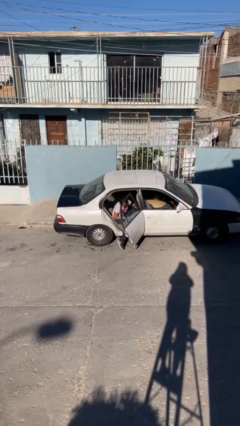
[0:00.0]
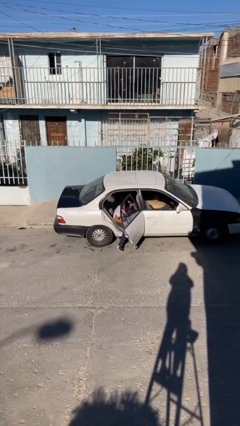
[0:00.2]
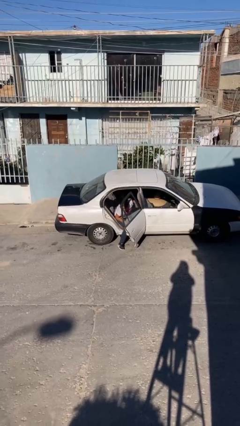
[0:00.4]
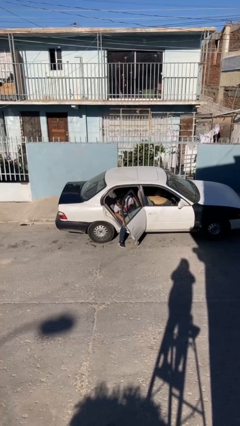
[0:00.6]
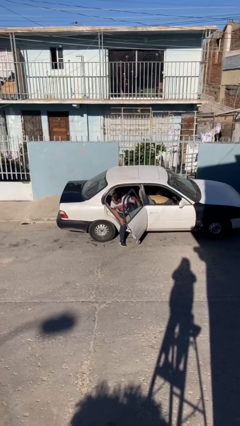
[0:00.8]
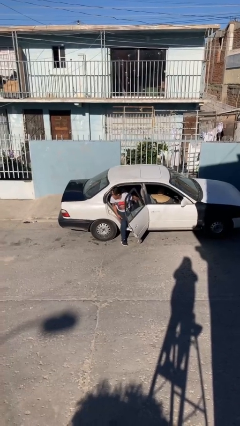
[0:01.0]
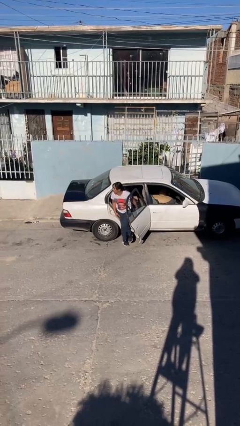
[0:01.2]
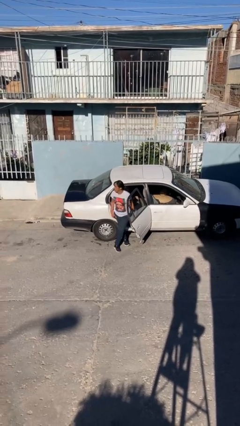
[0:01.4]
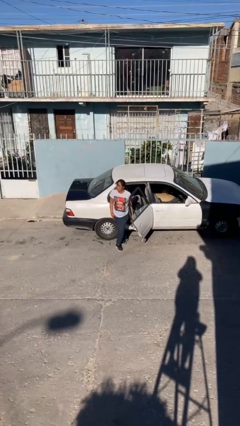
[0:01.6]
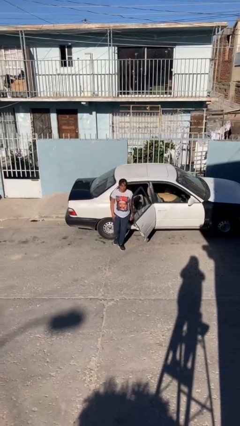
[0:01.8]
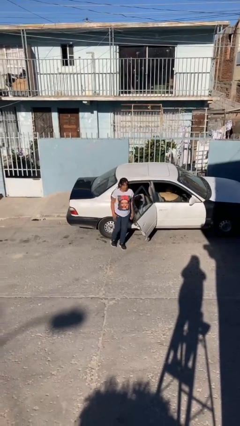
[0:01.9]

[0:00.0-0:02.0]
person exits car

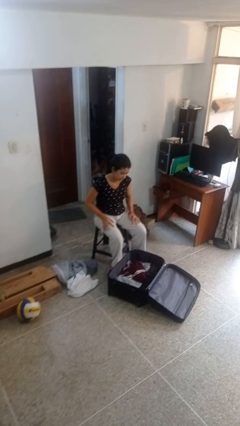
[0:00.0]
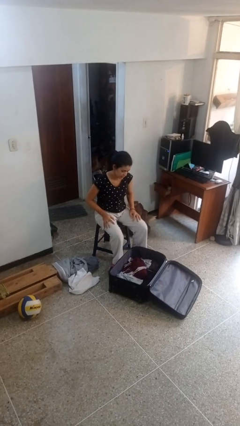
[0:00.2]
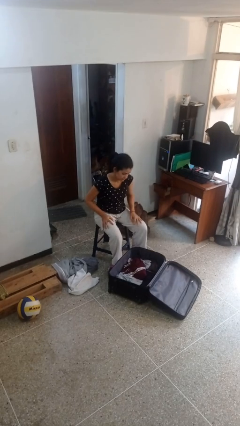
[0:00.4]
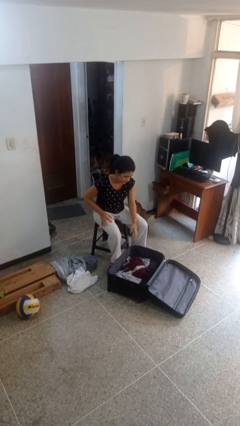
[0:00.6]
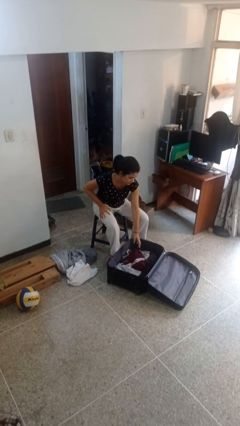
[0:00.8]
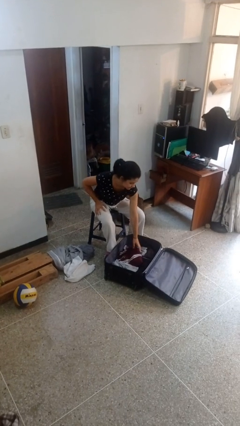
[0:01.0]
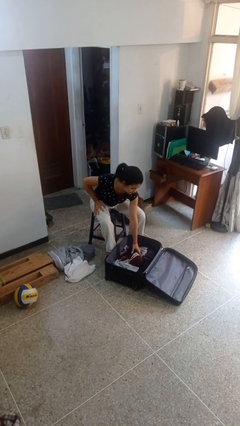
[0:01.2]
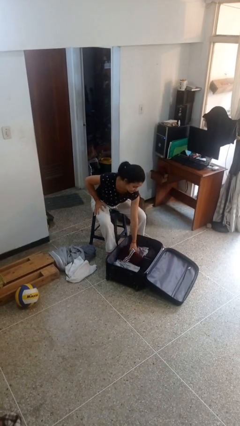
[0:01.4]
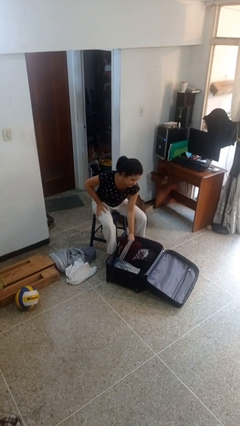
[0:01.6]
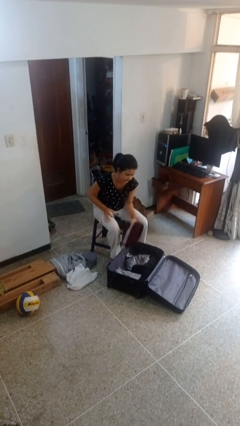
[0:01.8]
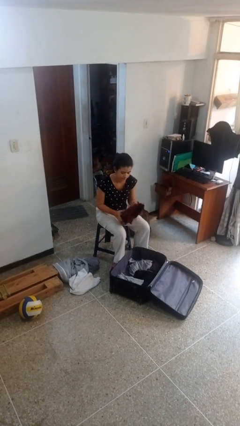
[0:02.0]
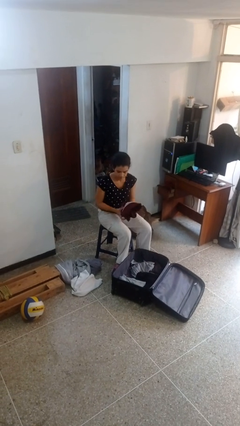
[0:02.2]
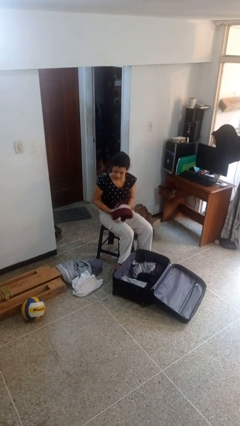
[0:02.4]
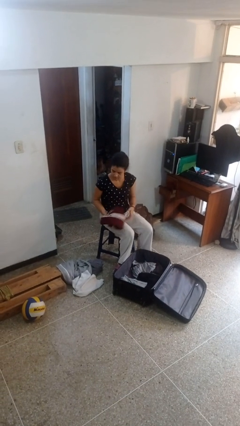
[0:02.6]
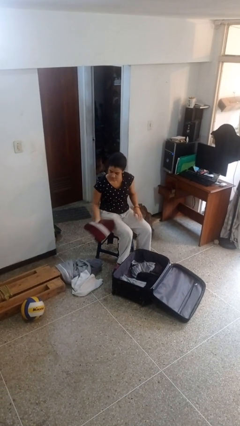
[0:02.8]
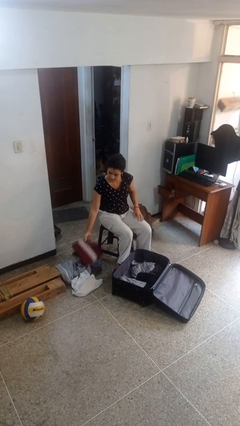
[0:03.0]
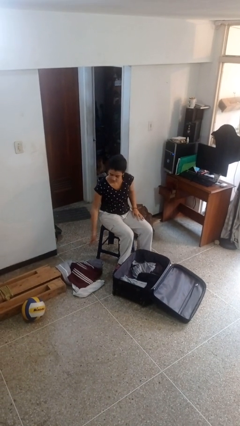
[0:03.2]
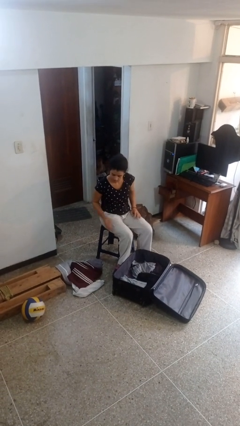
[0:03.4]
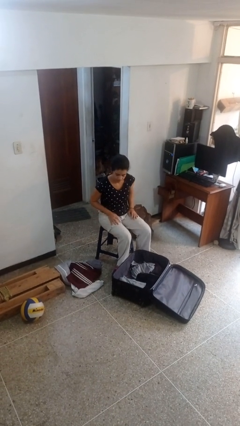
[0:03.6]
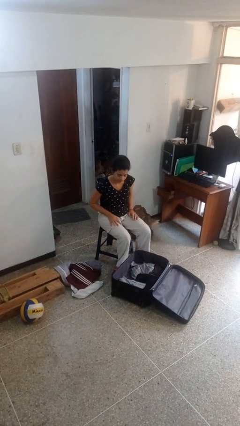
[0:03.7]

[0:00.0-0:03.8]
person unloads clothes from suitcase

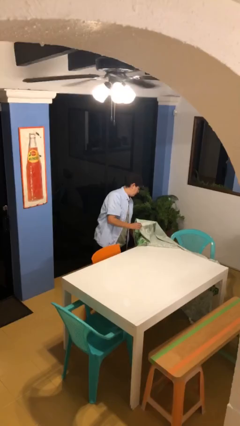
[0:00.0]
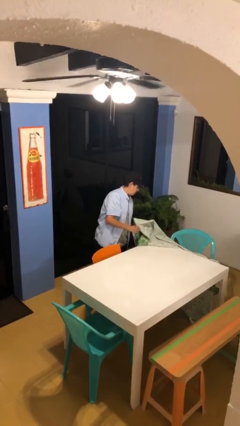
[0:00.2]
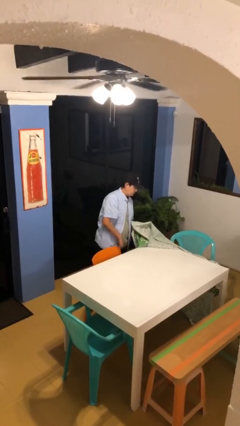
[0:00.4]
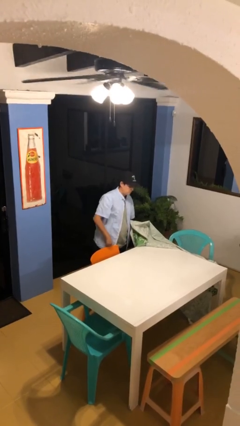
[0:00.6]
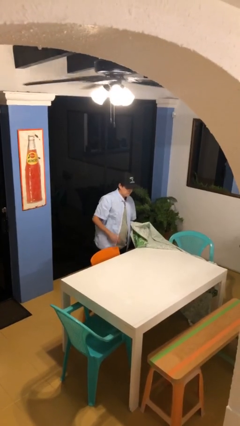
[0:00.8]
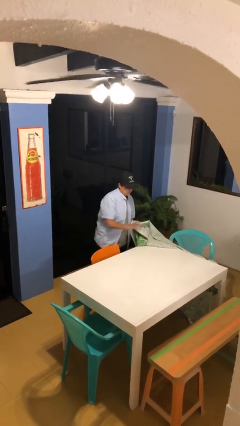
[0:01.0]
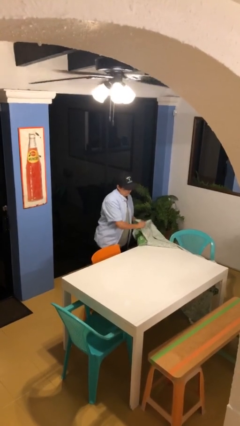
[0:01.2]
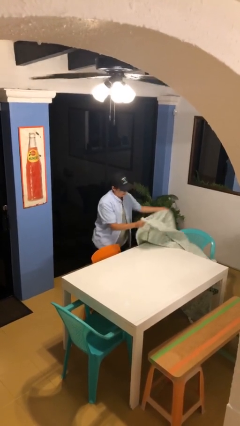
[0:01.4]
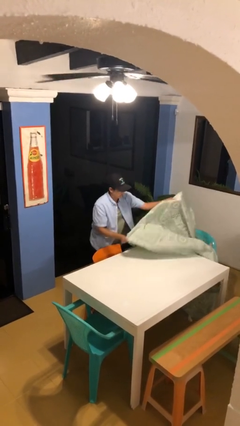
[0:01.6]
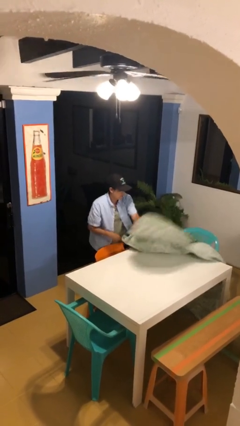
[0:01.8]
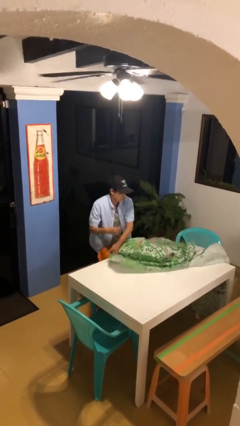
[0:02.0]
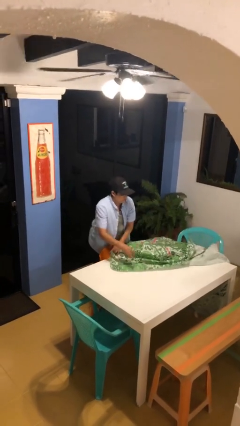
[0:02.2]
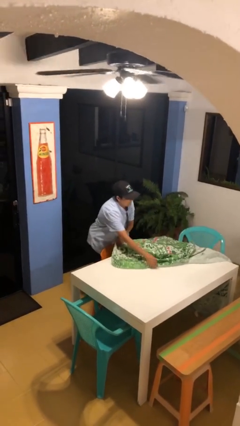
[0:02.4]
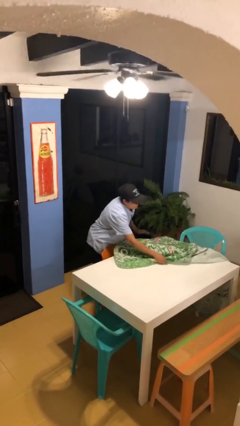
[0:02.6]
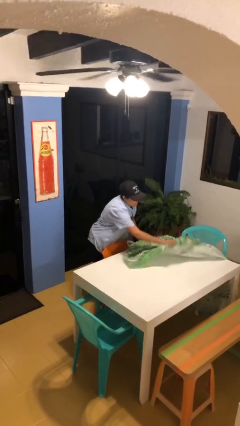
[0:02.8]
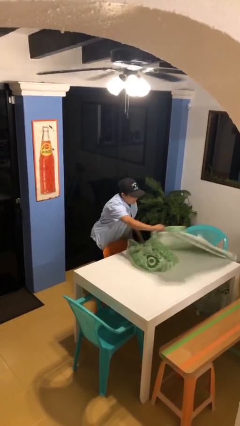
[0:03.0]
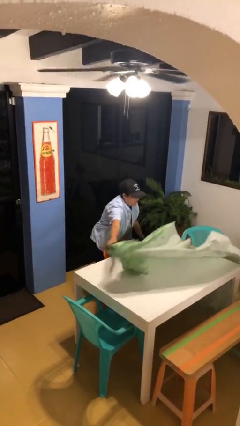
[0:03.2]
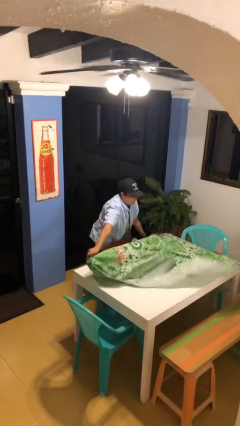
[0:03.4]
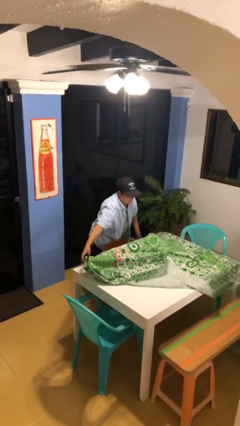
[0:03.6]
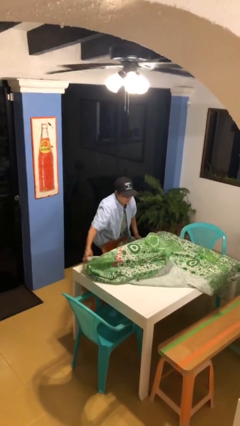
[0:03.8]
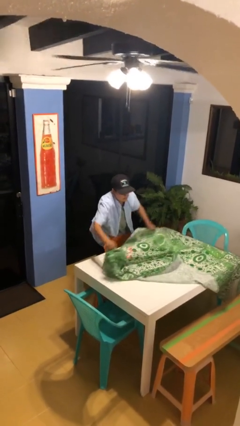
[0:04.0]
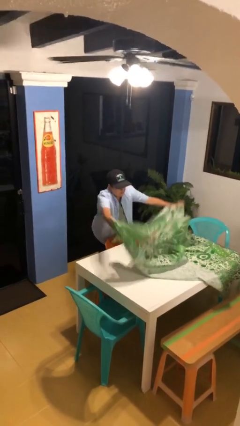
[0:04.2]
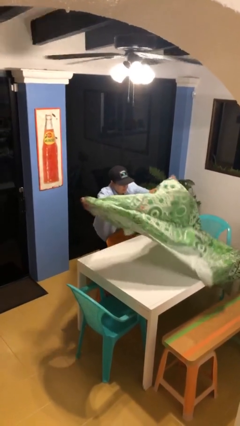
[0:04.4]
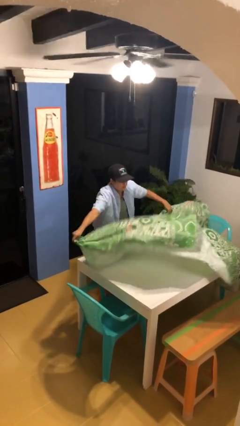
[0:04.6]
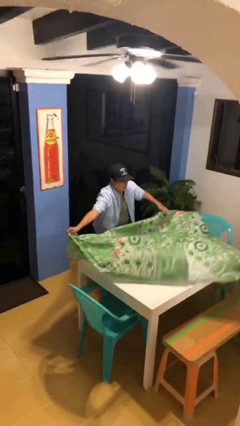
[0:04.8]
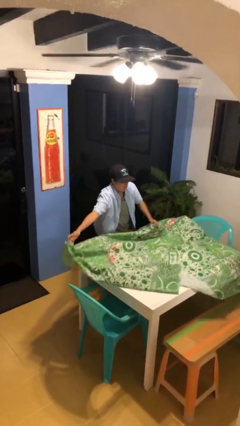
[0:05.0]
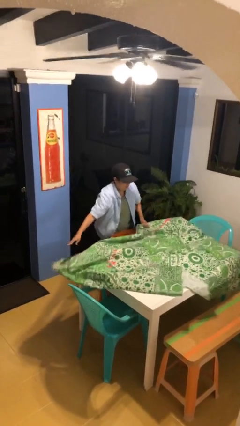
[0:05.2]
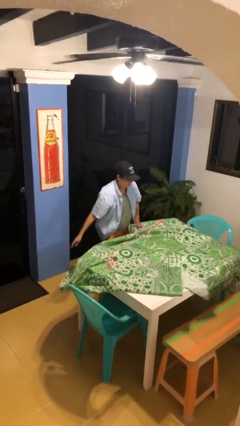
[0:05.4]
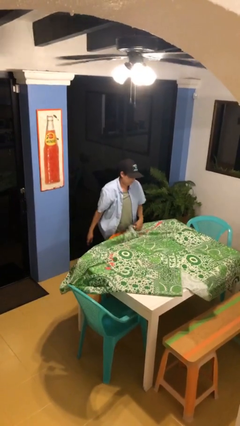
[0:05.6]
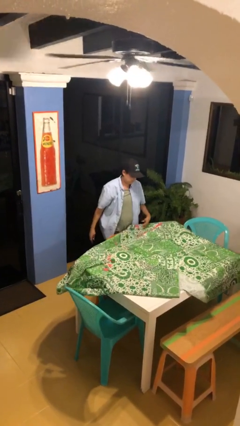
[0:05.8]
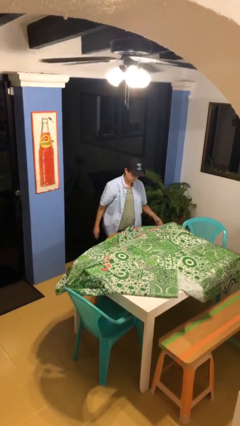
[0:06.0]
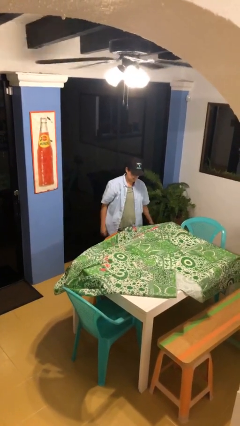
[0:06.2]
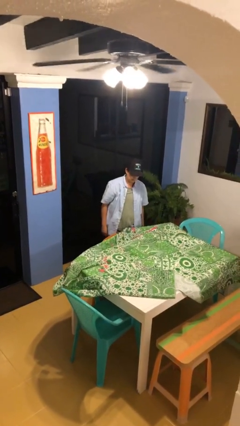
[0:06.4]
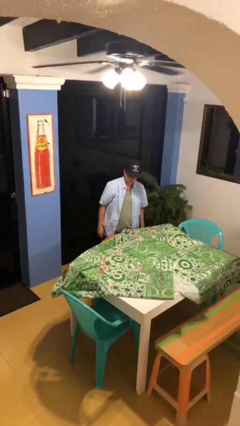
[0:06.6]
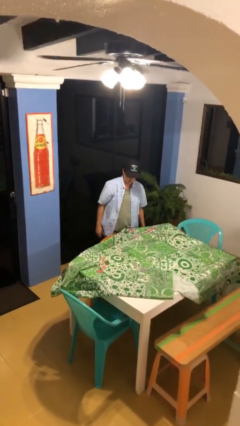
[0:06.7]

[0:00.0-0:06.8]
person spreads tablecloth

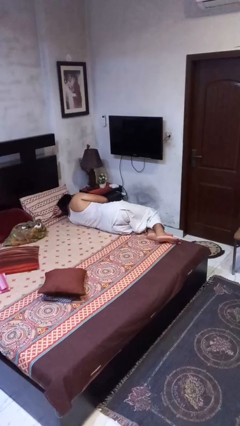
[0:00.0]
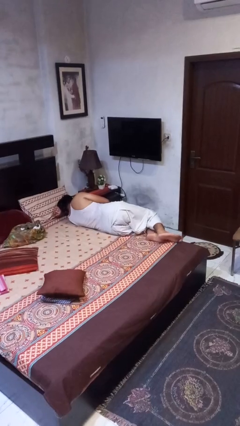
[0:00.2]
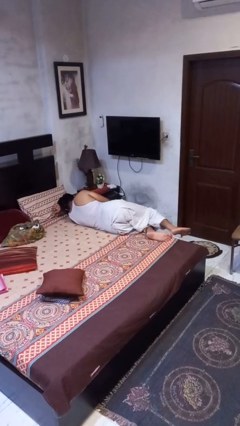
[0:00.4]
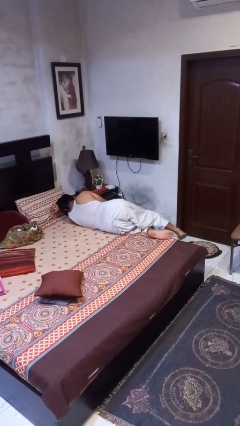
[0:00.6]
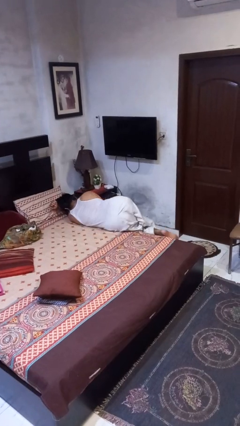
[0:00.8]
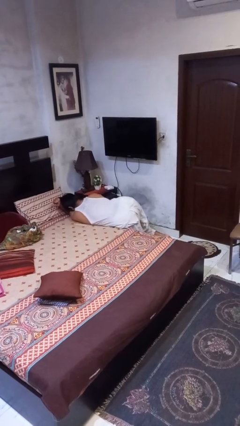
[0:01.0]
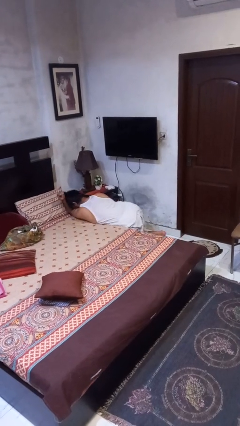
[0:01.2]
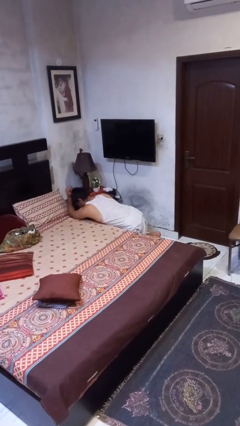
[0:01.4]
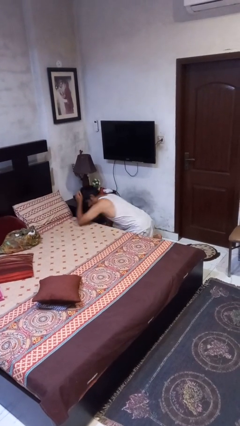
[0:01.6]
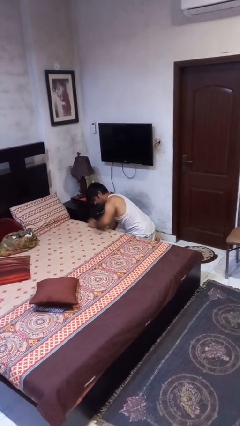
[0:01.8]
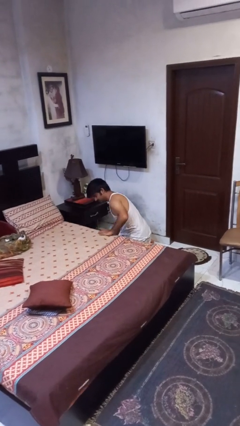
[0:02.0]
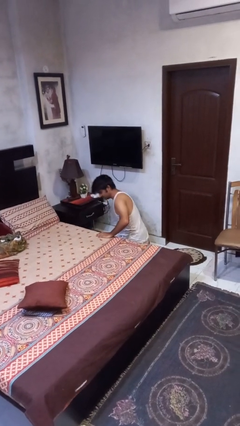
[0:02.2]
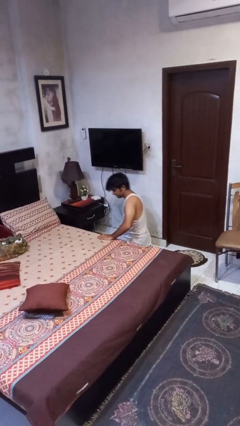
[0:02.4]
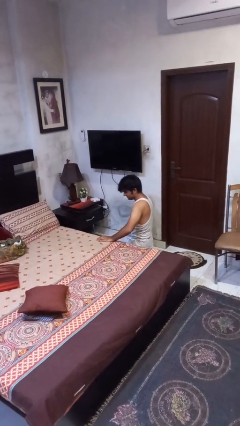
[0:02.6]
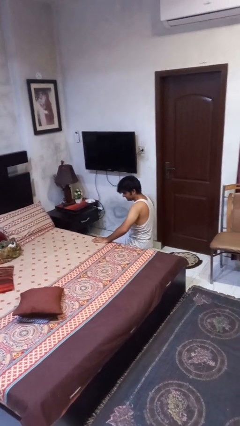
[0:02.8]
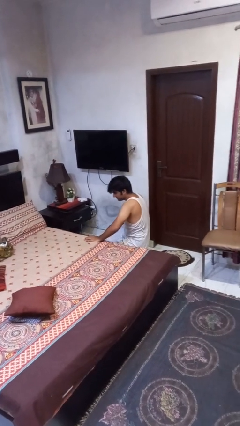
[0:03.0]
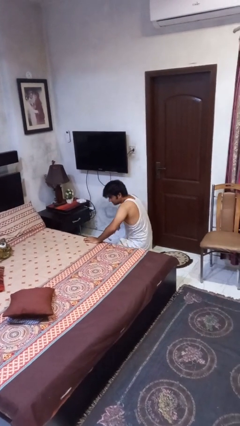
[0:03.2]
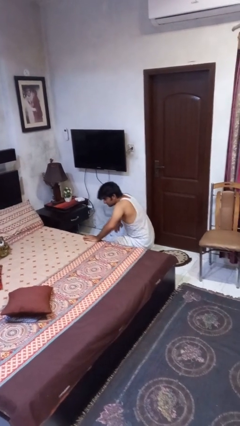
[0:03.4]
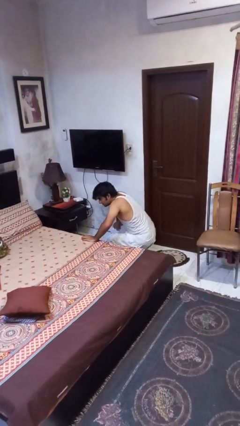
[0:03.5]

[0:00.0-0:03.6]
person falls from bed

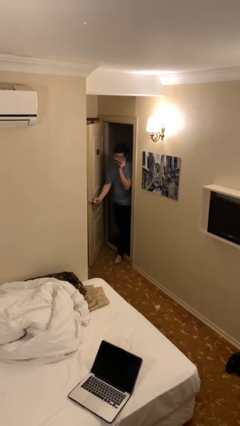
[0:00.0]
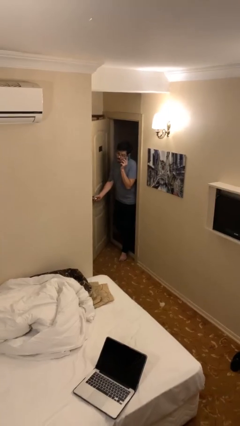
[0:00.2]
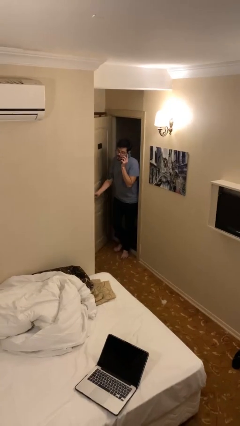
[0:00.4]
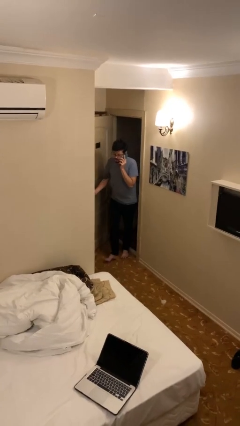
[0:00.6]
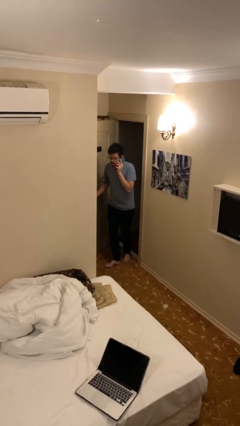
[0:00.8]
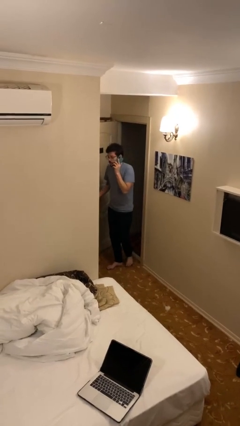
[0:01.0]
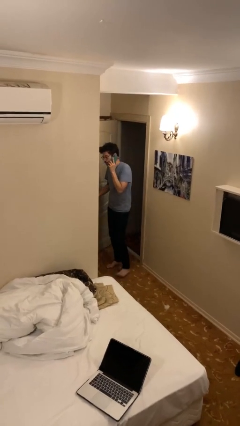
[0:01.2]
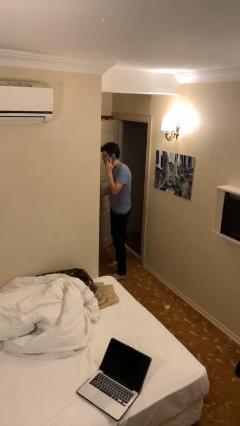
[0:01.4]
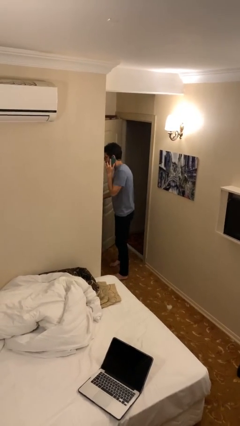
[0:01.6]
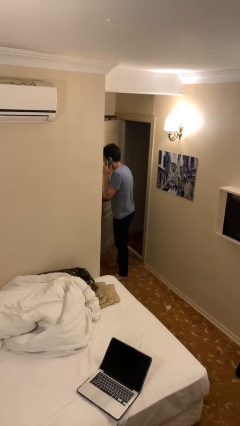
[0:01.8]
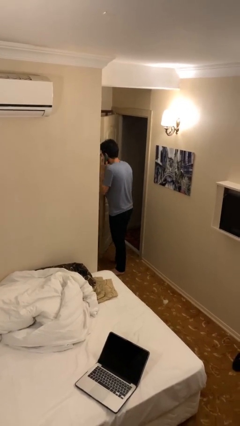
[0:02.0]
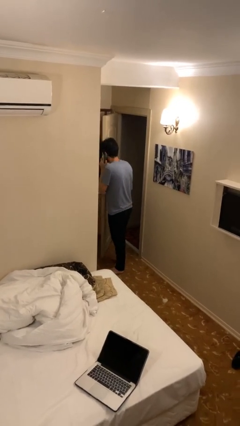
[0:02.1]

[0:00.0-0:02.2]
person enters scene through structure
